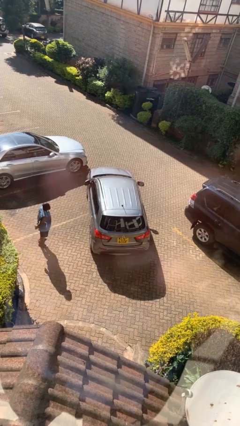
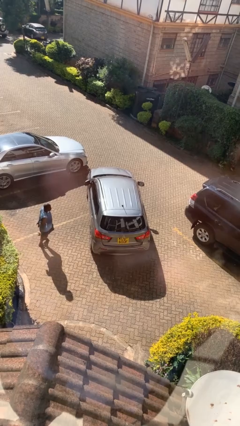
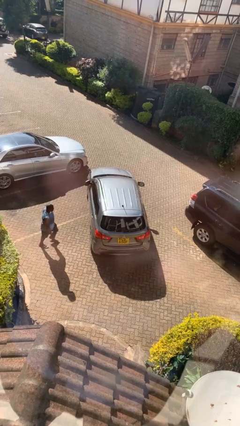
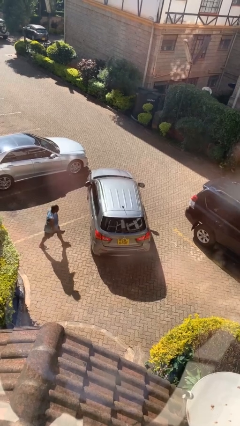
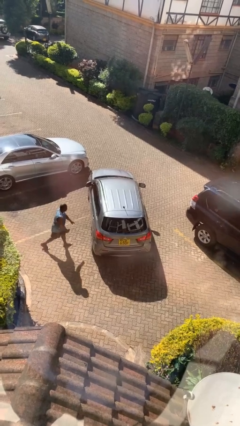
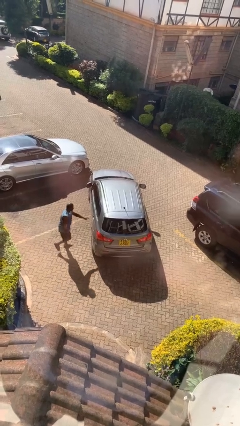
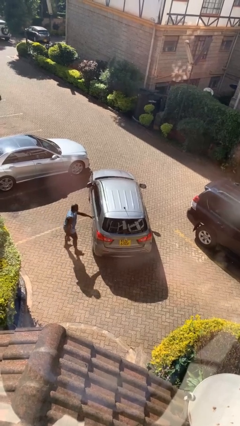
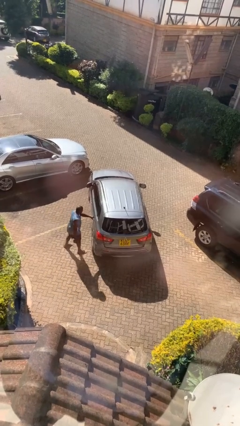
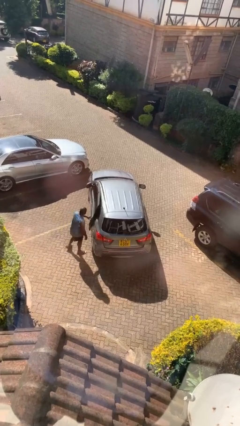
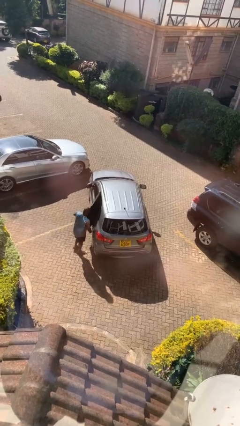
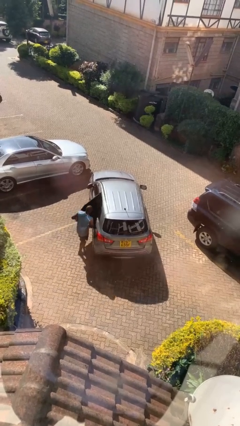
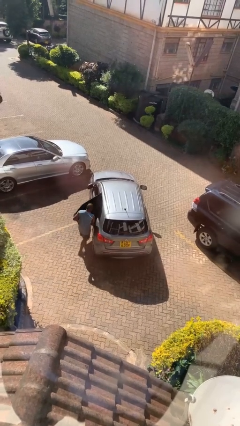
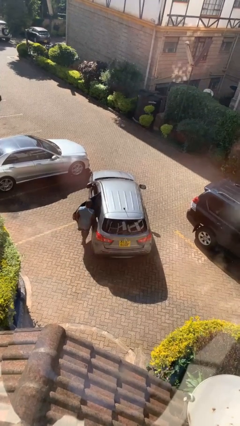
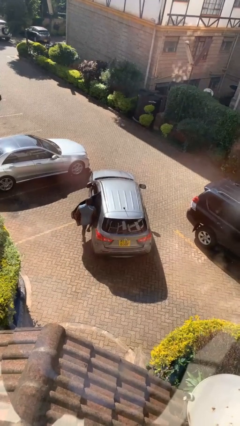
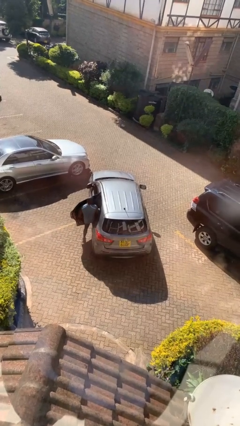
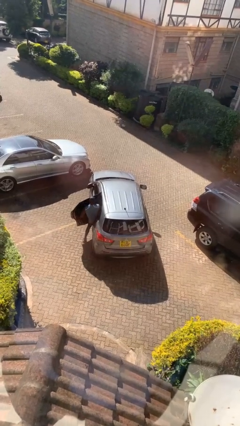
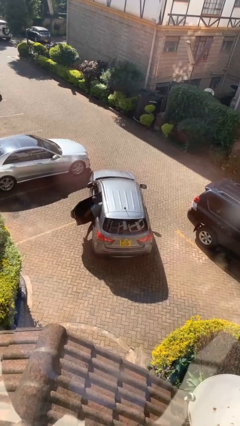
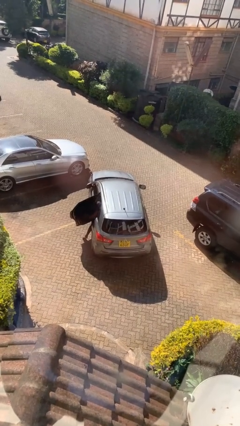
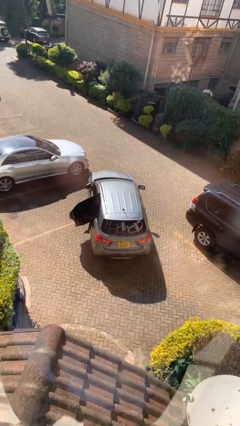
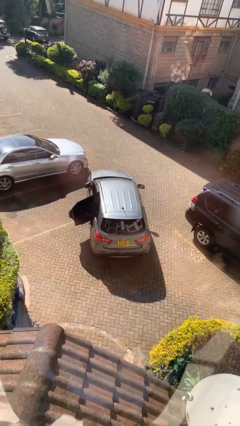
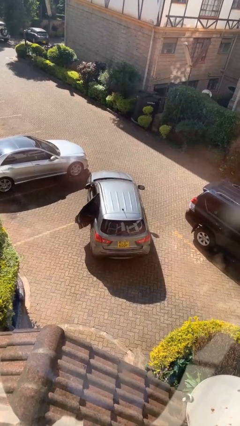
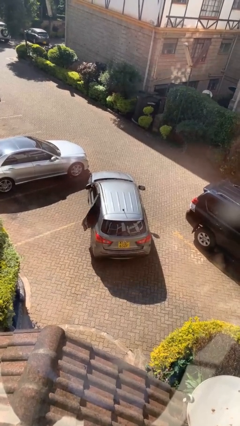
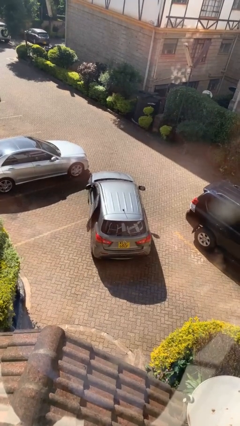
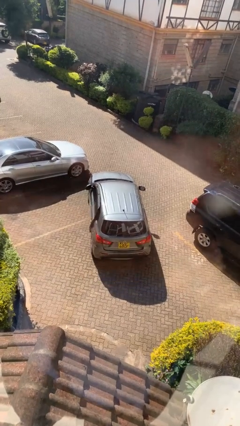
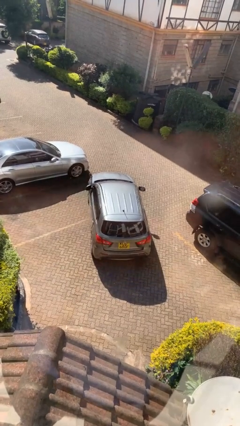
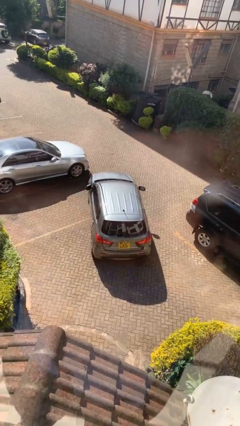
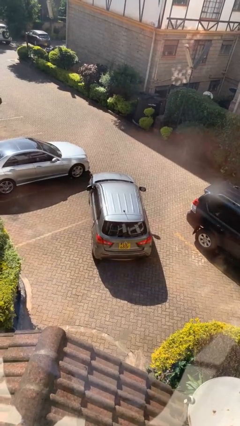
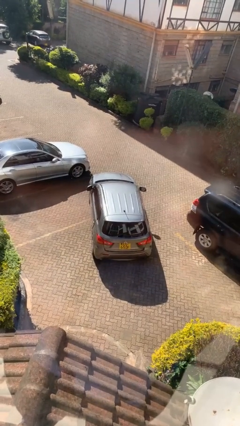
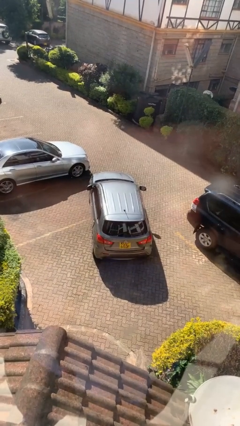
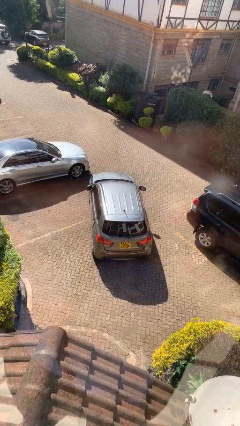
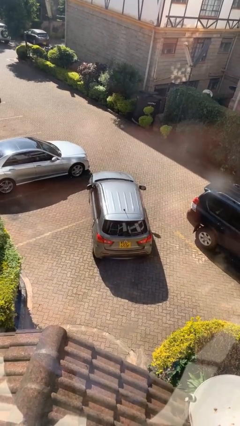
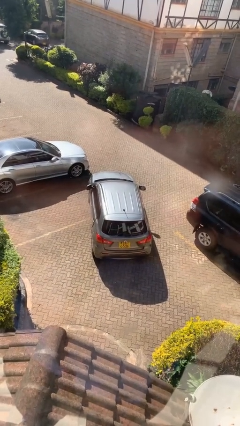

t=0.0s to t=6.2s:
car picks up person

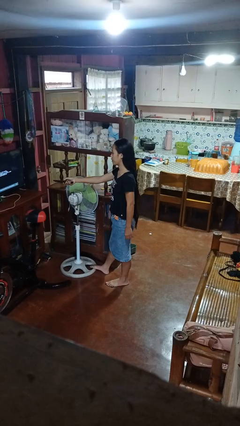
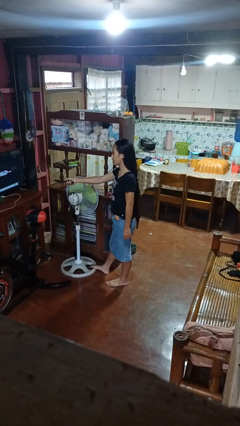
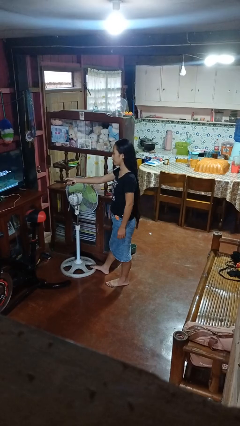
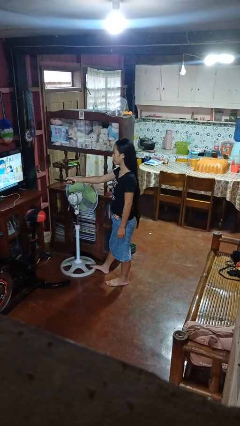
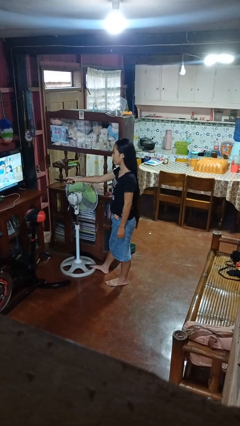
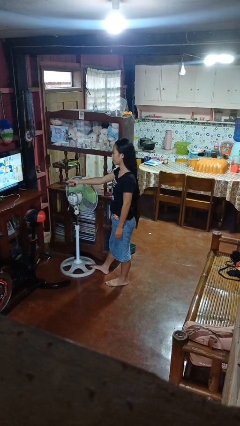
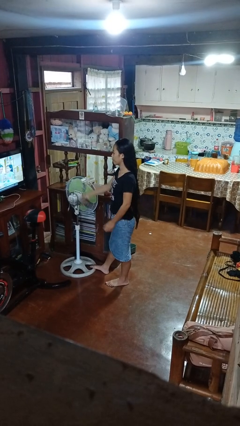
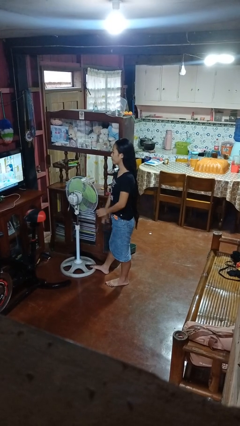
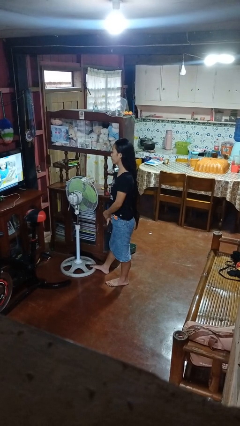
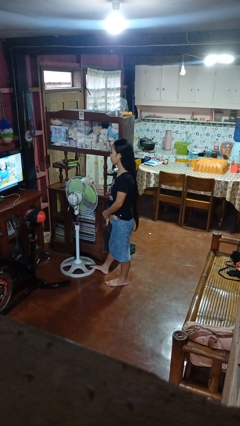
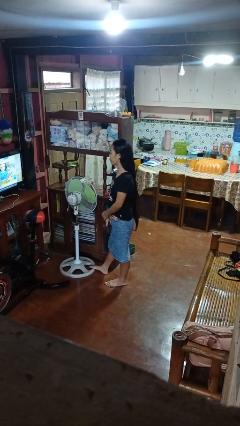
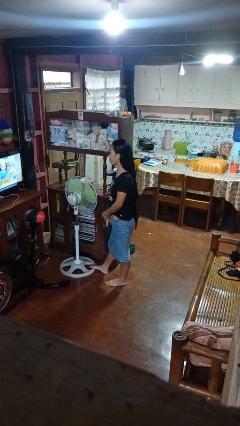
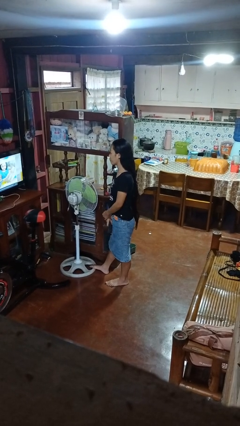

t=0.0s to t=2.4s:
person uses television remote

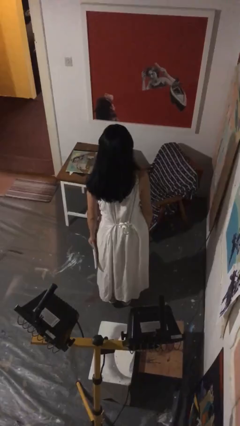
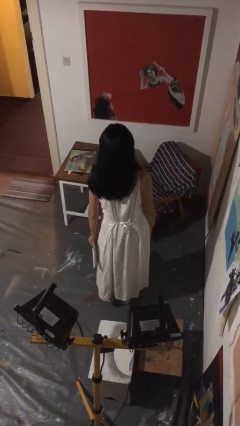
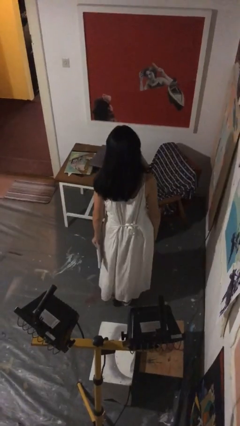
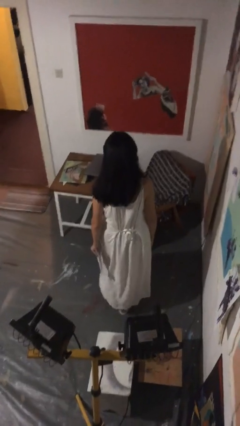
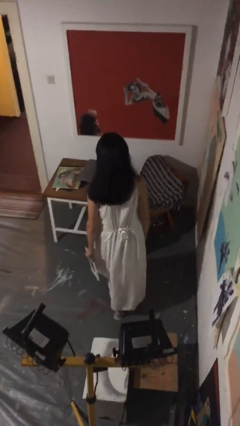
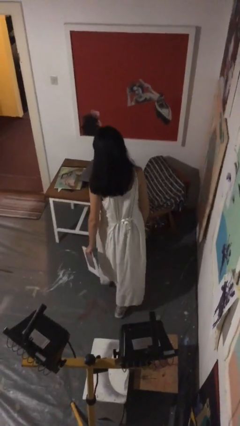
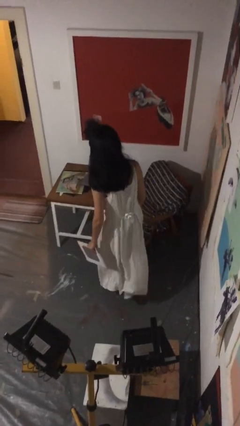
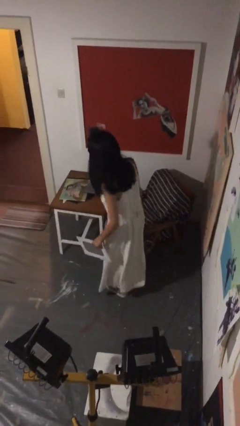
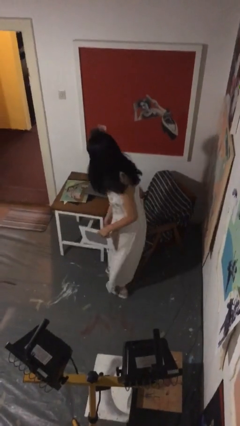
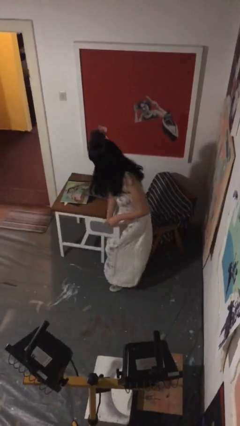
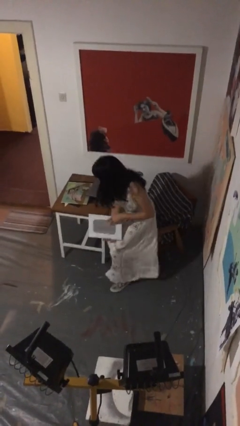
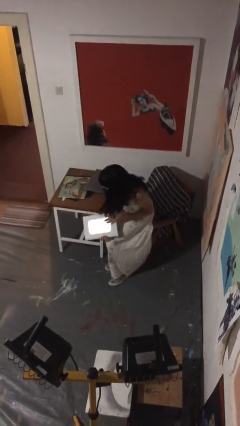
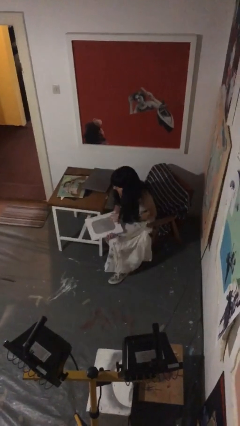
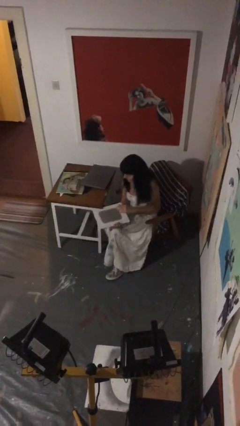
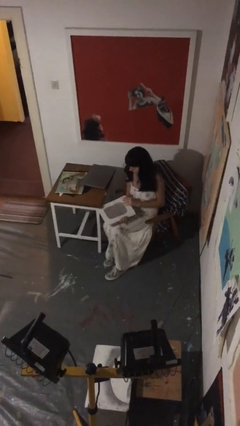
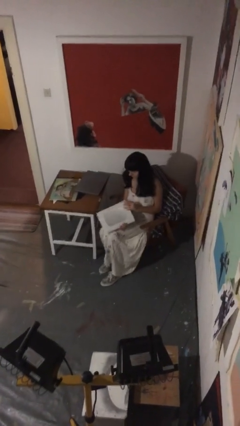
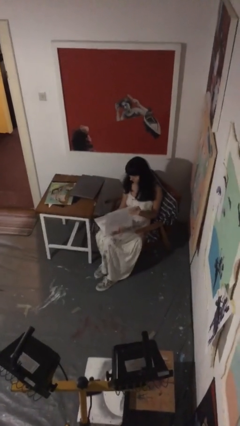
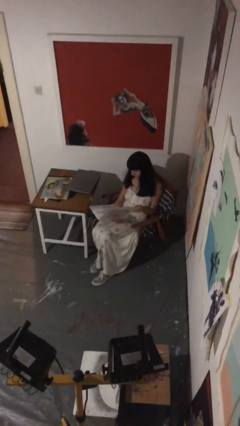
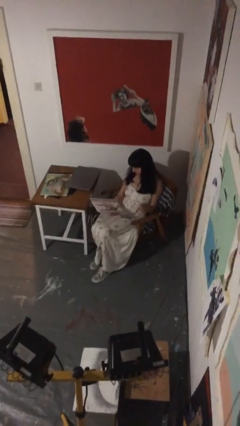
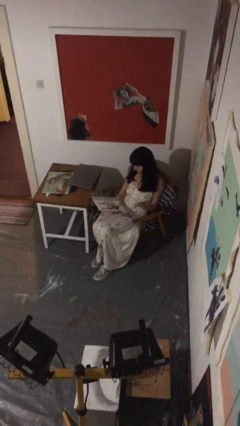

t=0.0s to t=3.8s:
person sits down

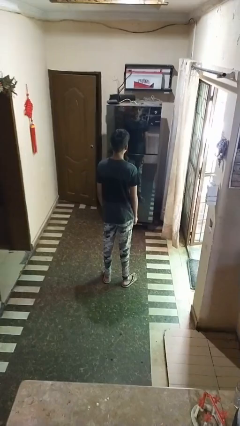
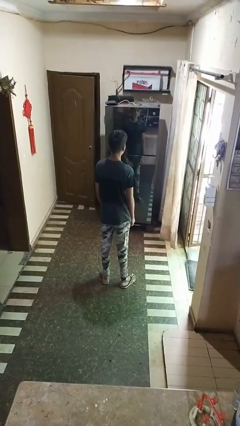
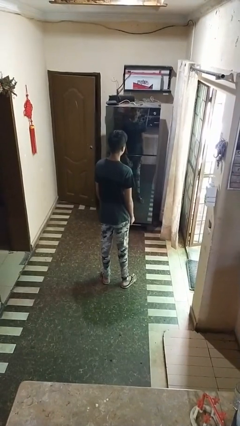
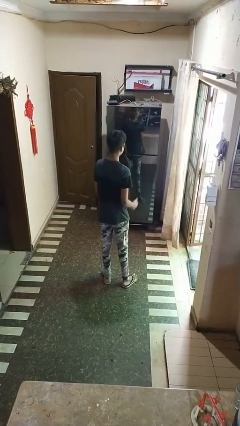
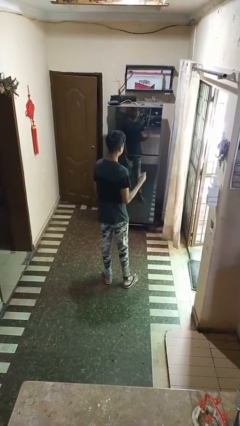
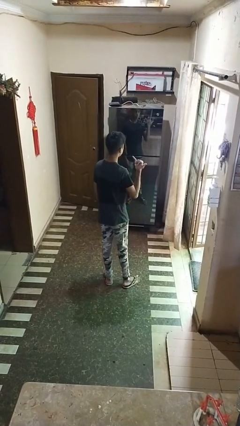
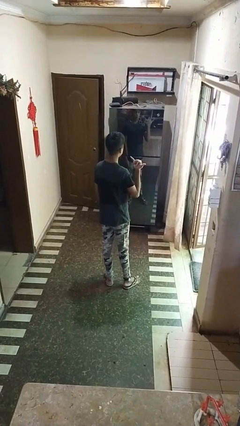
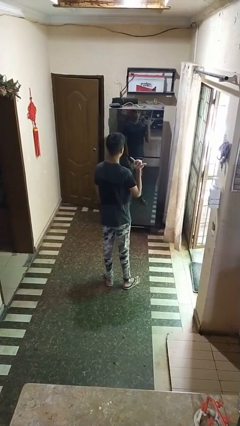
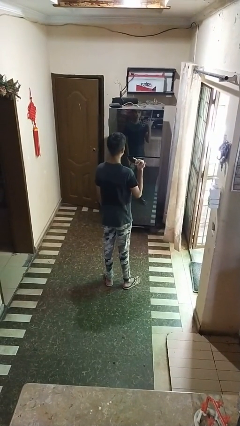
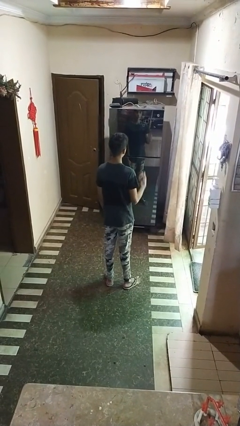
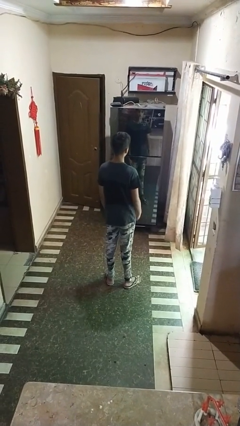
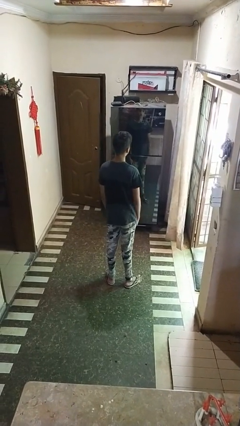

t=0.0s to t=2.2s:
person gestures hang loose

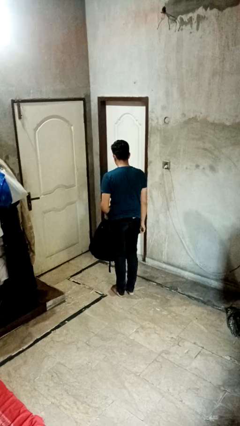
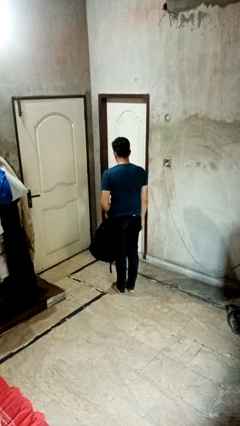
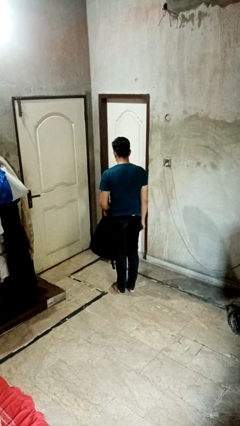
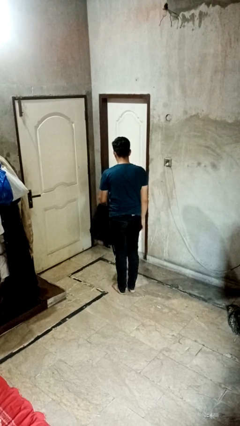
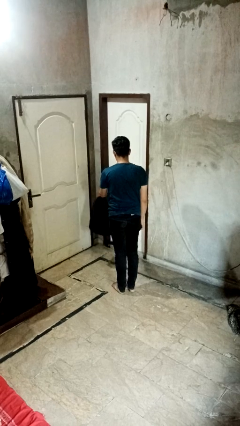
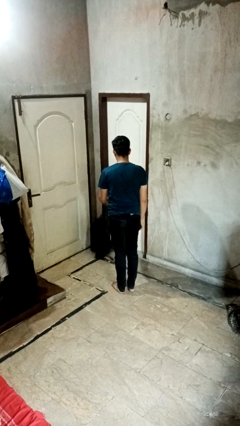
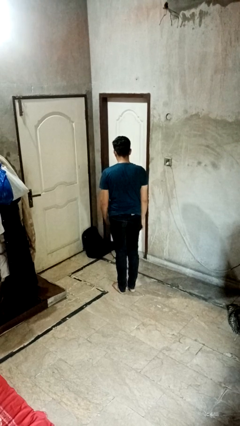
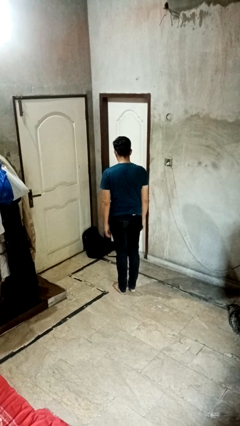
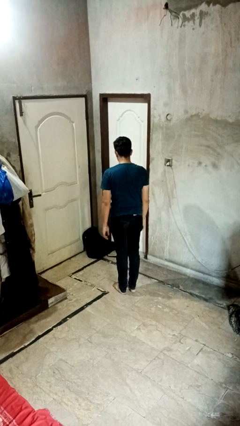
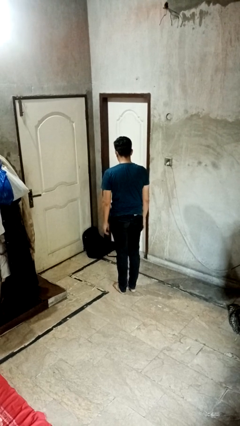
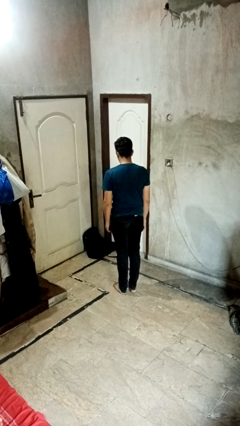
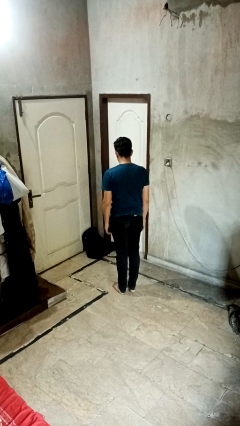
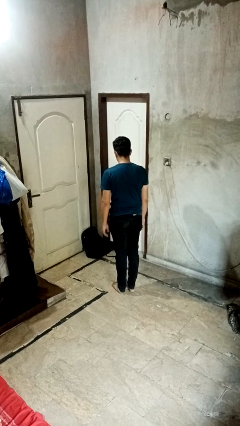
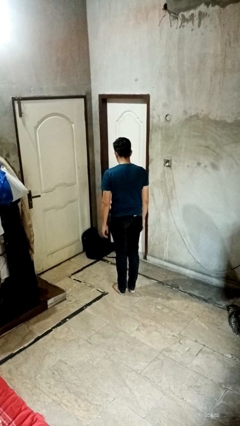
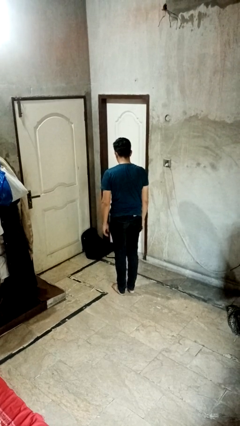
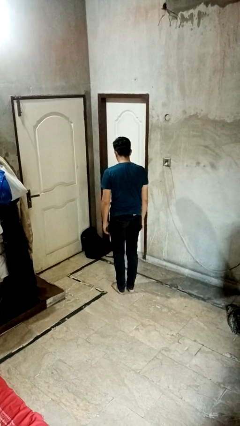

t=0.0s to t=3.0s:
person throws object to ground
